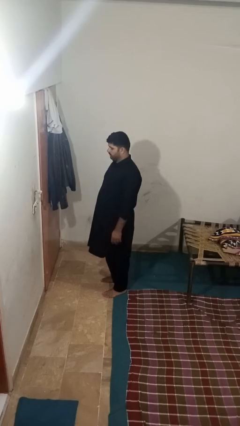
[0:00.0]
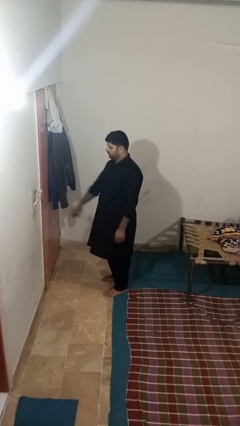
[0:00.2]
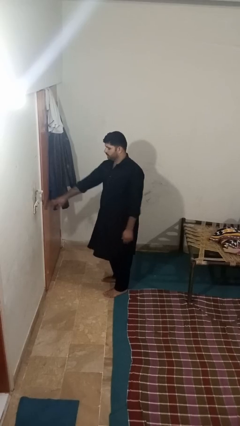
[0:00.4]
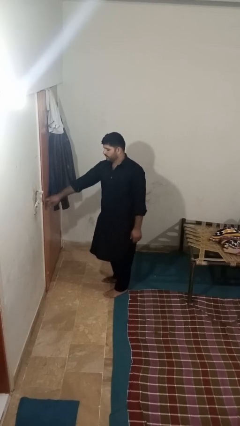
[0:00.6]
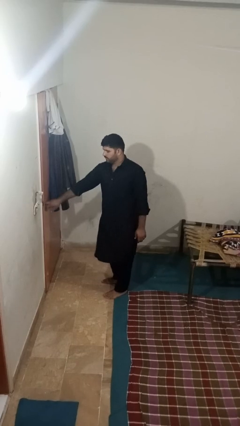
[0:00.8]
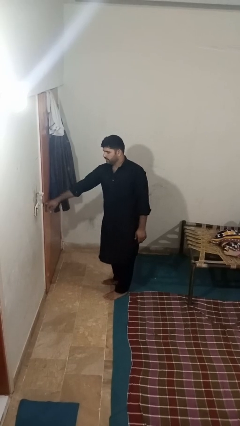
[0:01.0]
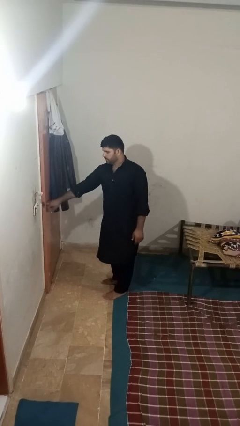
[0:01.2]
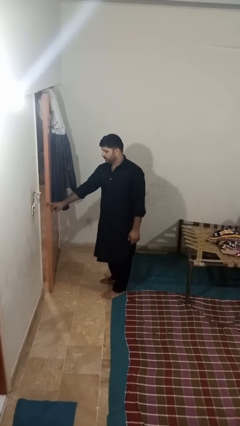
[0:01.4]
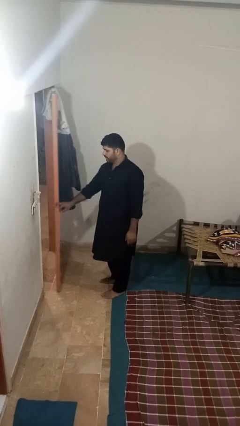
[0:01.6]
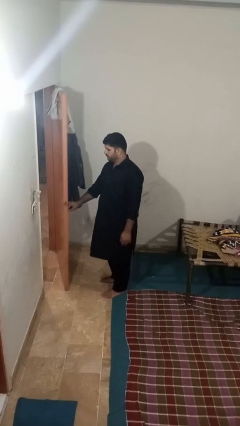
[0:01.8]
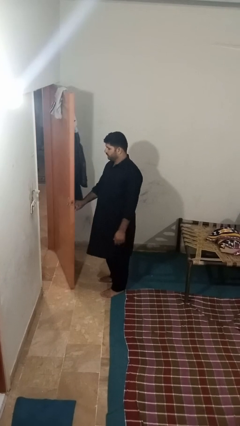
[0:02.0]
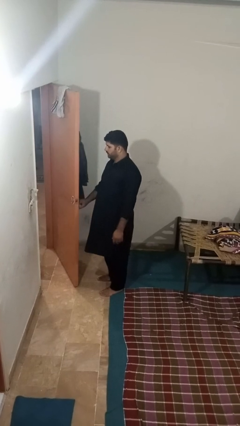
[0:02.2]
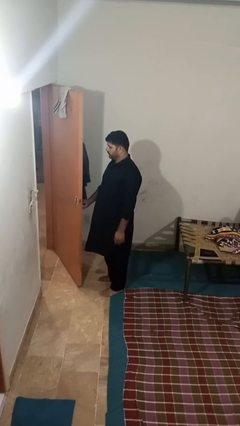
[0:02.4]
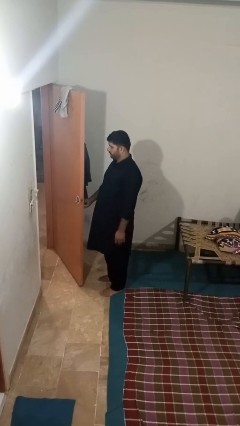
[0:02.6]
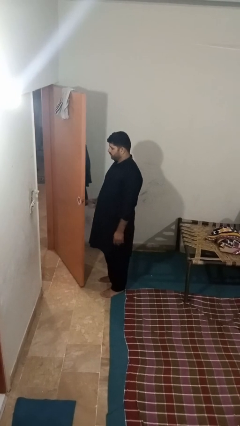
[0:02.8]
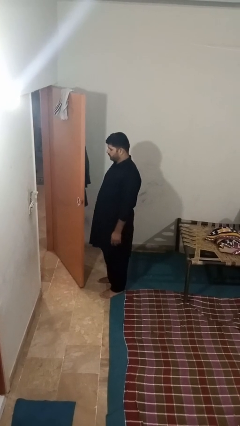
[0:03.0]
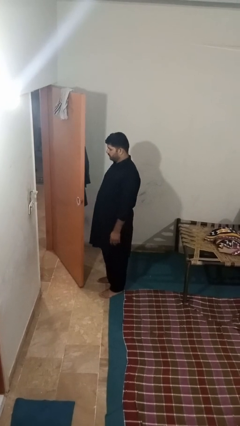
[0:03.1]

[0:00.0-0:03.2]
person opens facility door

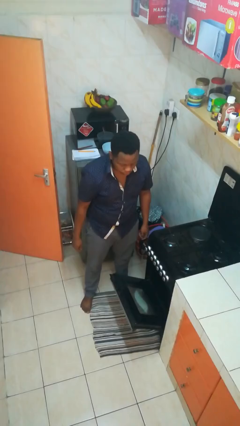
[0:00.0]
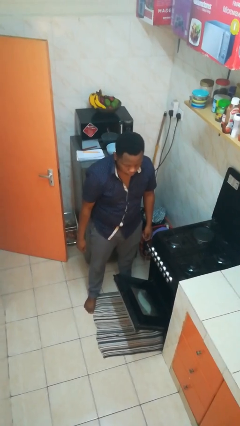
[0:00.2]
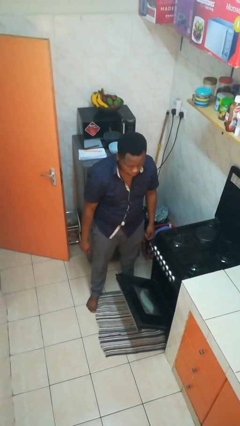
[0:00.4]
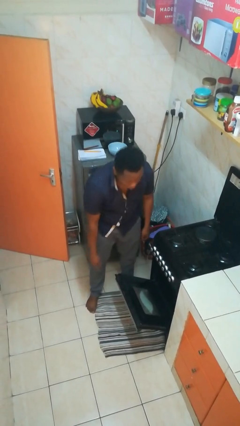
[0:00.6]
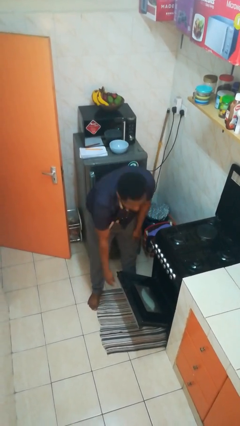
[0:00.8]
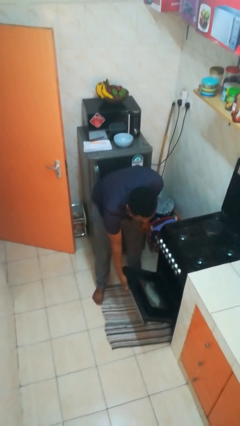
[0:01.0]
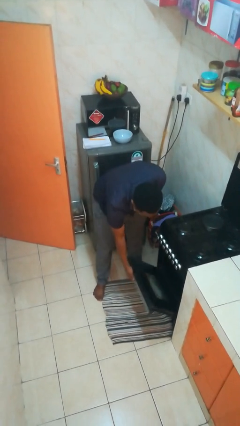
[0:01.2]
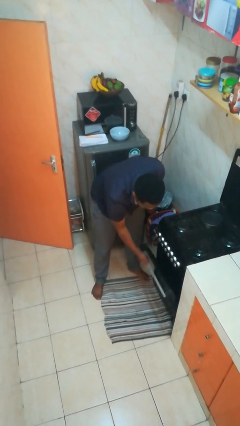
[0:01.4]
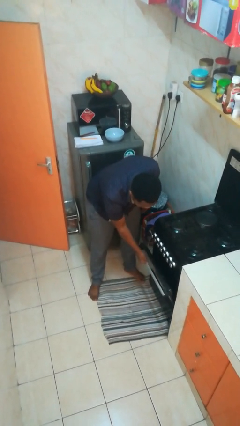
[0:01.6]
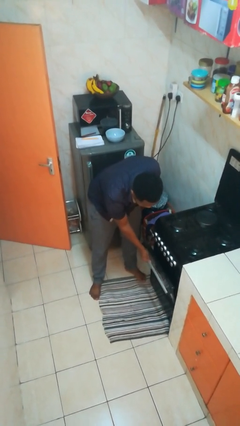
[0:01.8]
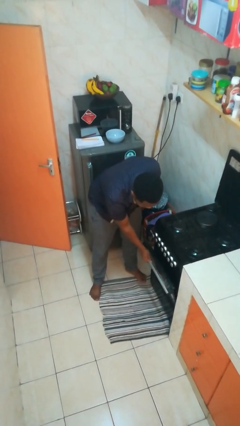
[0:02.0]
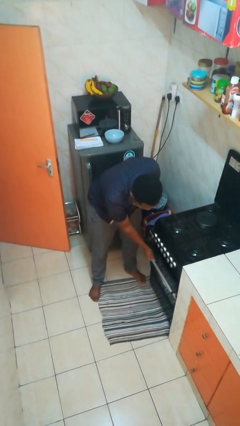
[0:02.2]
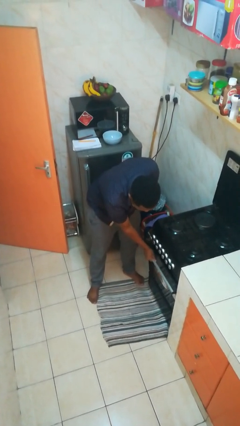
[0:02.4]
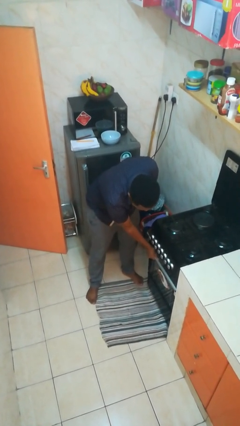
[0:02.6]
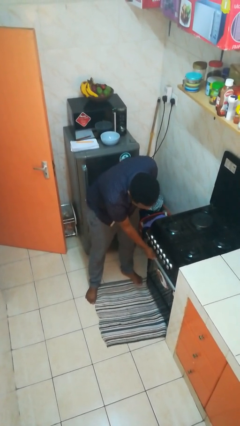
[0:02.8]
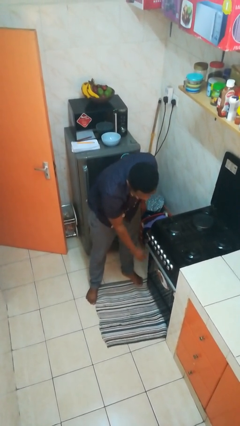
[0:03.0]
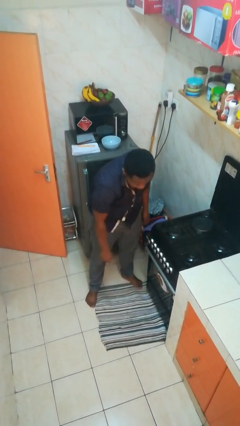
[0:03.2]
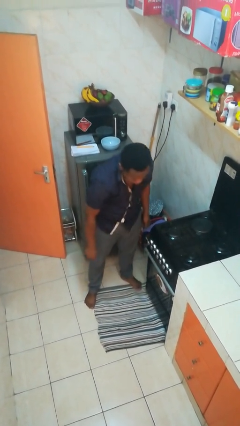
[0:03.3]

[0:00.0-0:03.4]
person closes oven door

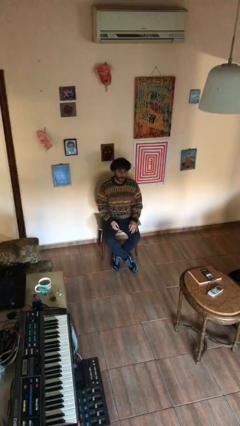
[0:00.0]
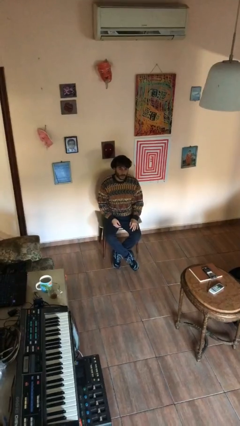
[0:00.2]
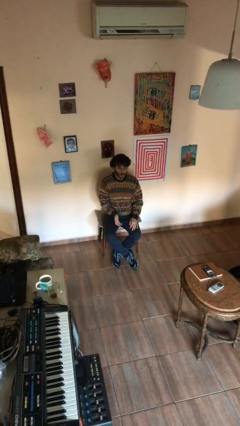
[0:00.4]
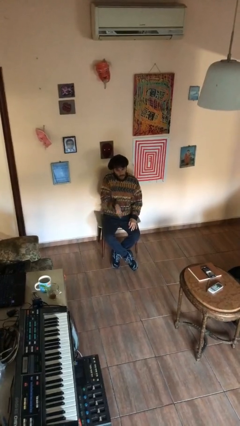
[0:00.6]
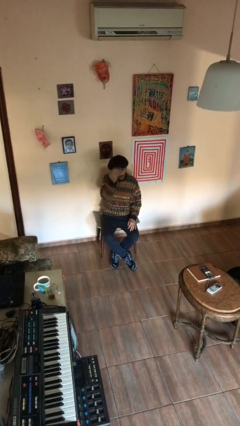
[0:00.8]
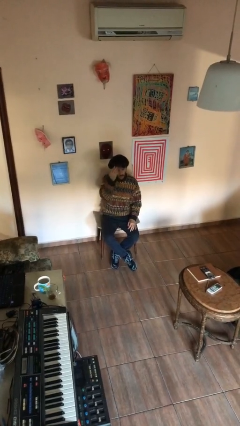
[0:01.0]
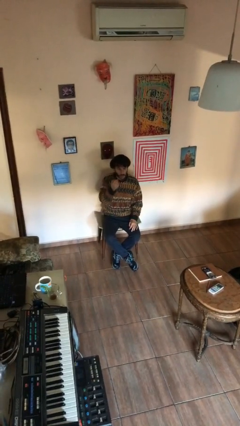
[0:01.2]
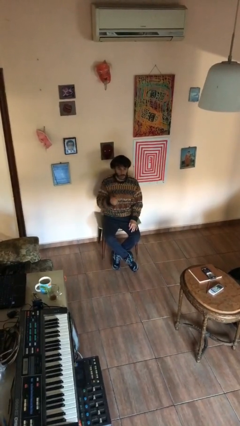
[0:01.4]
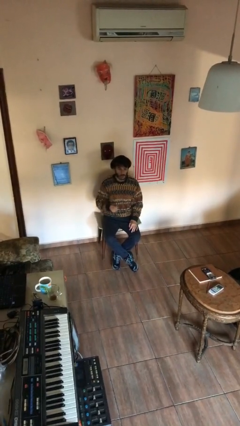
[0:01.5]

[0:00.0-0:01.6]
person gestures swipe up

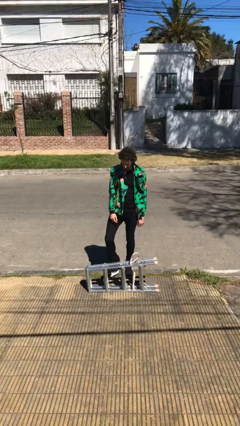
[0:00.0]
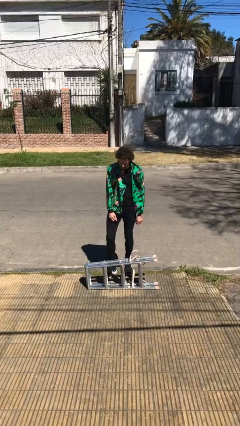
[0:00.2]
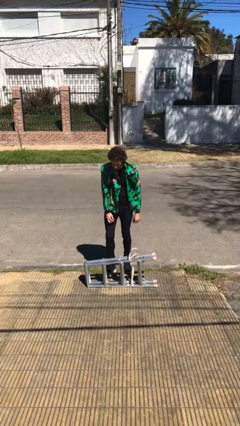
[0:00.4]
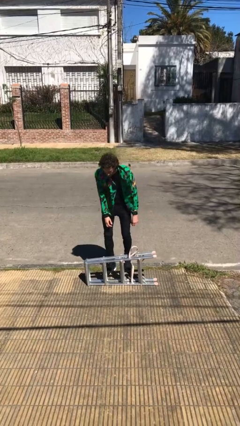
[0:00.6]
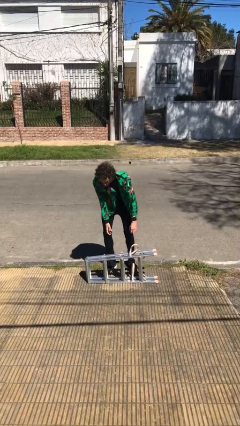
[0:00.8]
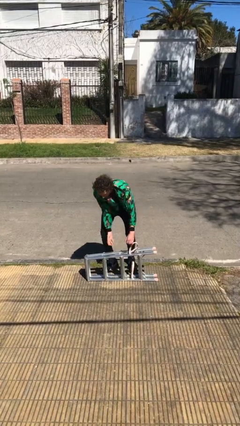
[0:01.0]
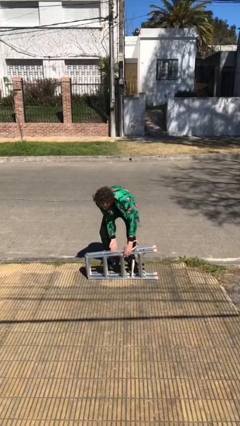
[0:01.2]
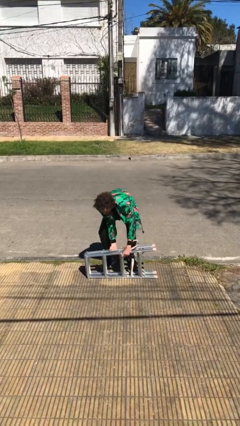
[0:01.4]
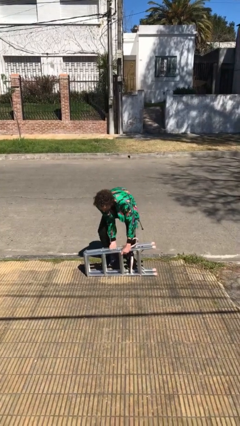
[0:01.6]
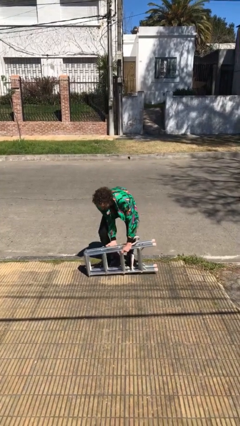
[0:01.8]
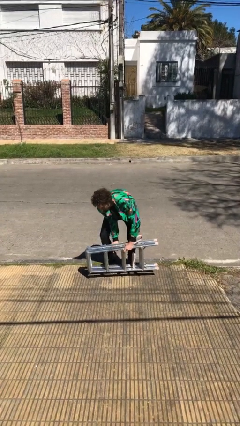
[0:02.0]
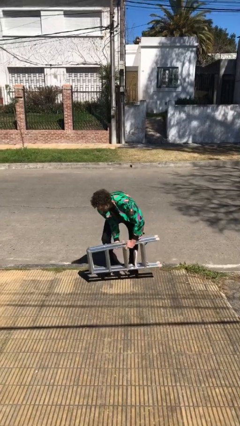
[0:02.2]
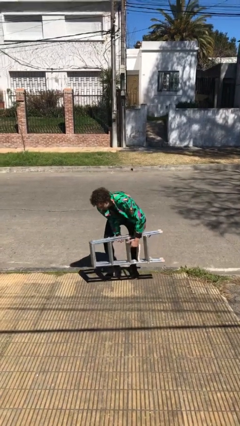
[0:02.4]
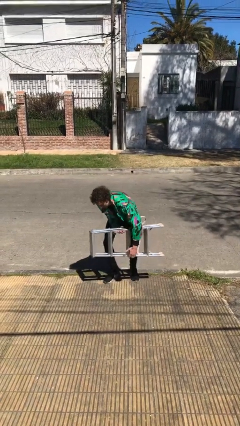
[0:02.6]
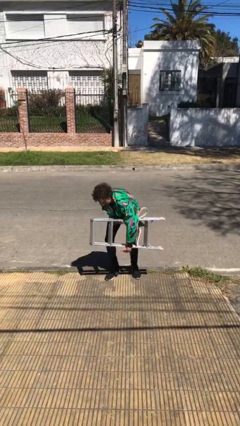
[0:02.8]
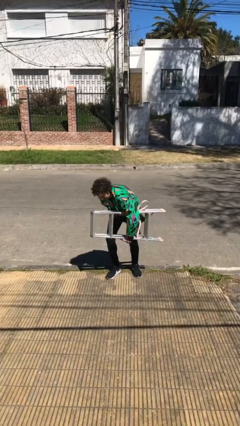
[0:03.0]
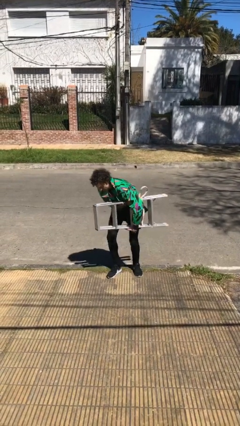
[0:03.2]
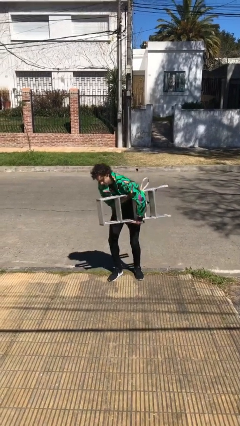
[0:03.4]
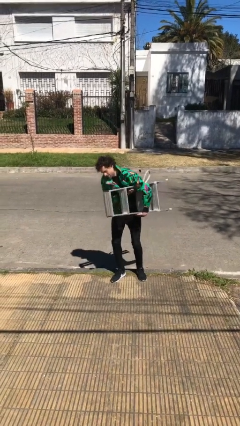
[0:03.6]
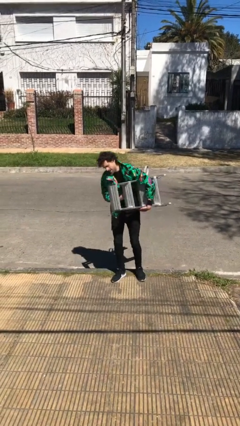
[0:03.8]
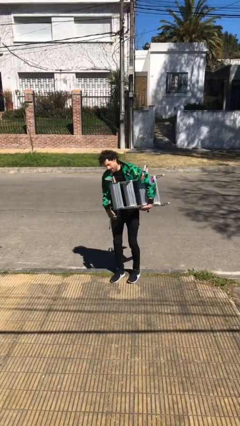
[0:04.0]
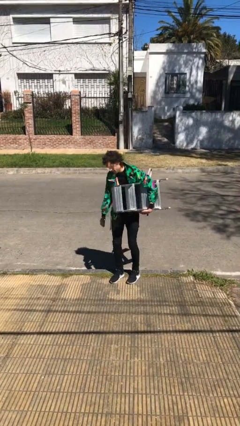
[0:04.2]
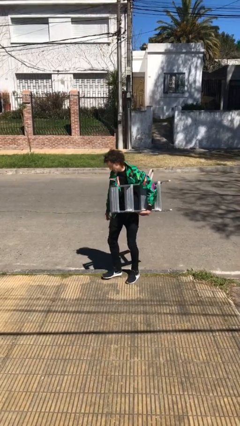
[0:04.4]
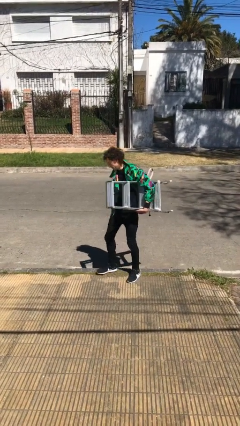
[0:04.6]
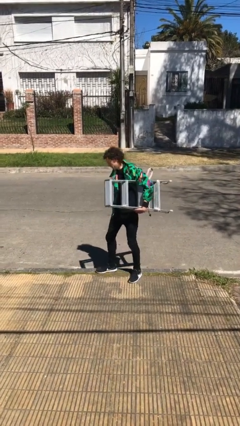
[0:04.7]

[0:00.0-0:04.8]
person picks up object from floor

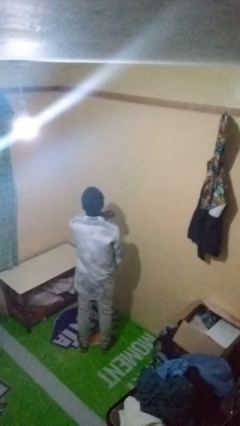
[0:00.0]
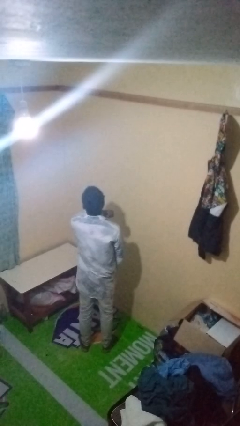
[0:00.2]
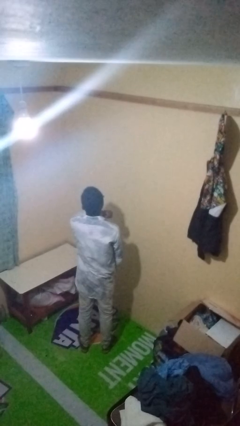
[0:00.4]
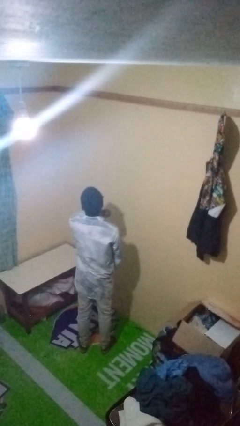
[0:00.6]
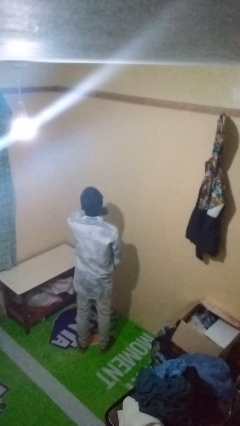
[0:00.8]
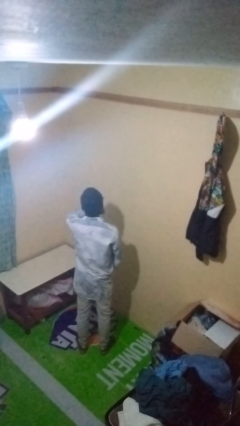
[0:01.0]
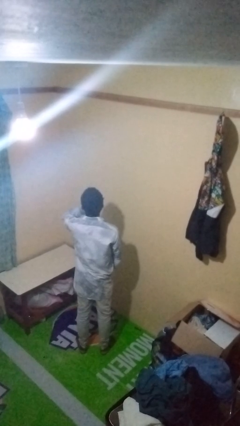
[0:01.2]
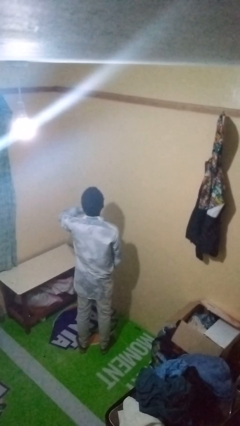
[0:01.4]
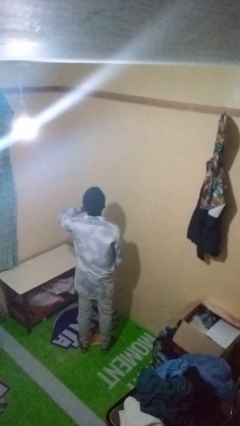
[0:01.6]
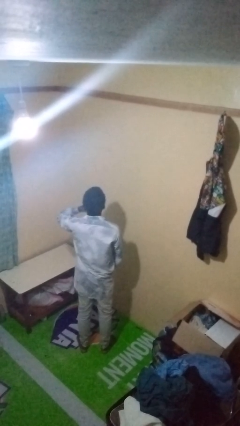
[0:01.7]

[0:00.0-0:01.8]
person gestures cut

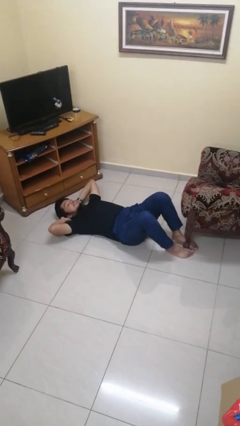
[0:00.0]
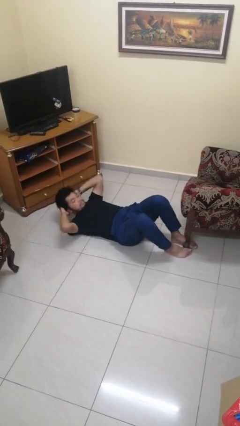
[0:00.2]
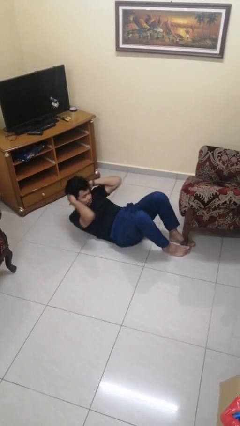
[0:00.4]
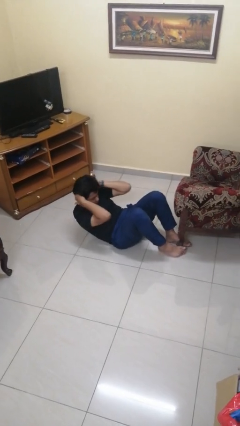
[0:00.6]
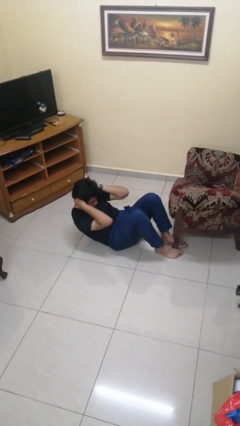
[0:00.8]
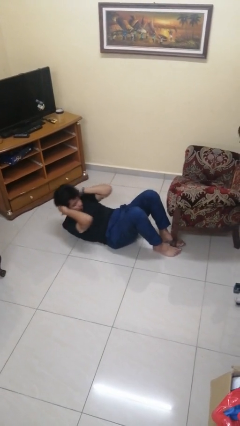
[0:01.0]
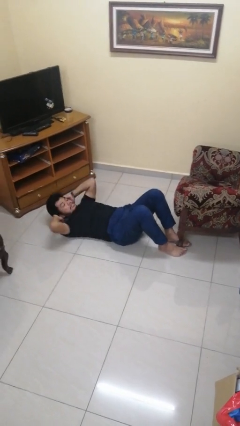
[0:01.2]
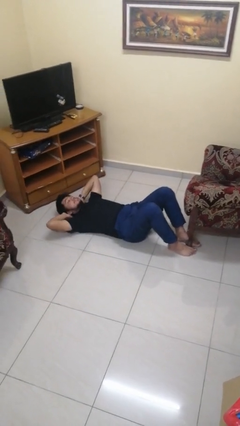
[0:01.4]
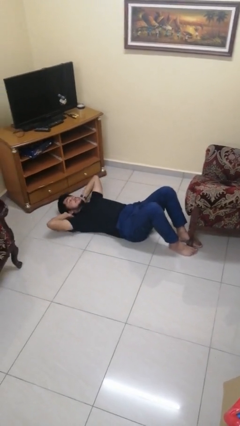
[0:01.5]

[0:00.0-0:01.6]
person exercises with situp

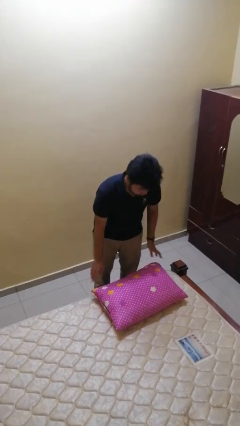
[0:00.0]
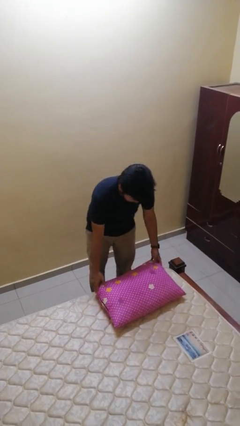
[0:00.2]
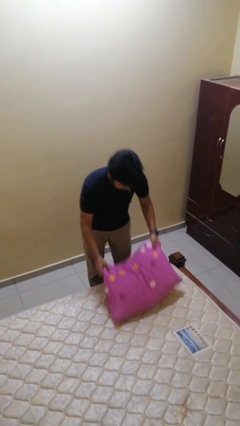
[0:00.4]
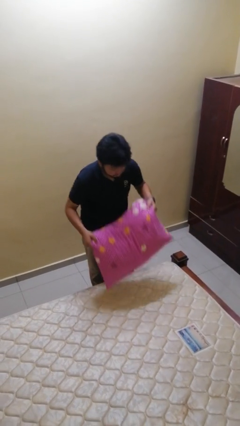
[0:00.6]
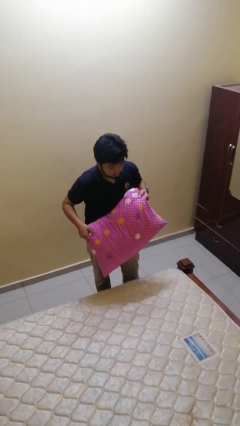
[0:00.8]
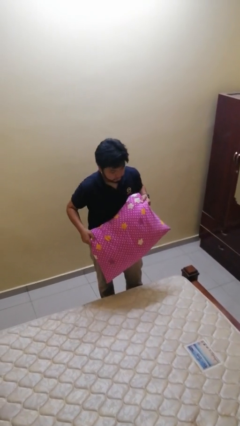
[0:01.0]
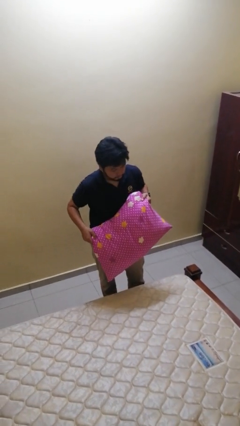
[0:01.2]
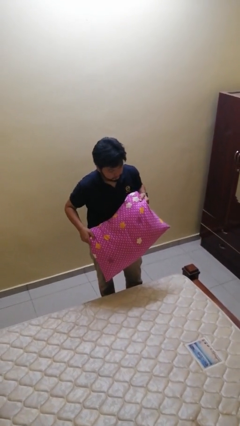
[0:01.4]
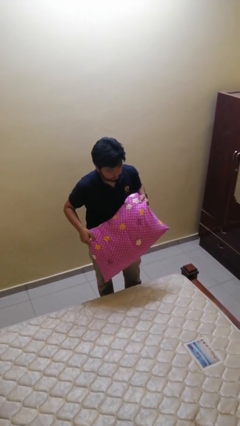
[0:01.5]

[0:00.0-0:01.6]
person picks up object from bed
